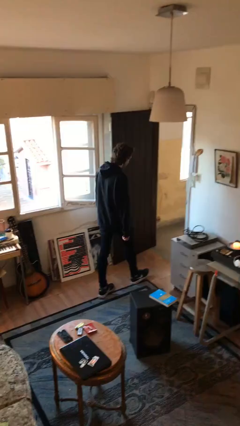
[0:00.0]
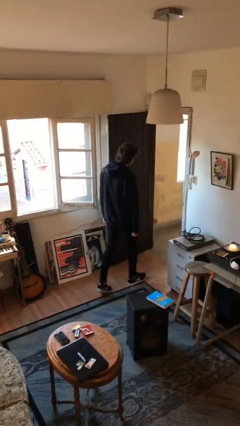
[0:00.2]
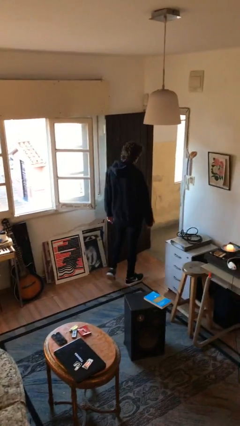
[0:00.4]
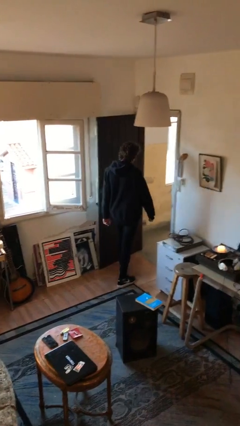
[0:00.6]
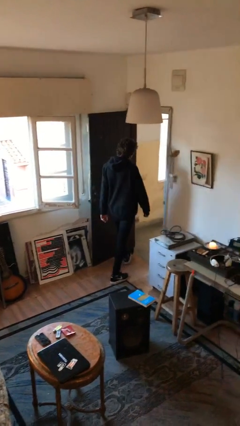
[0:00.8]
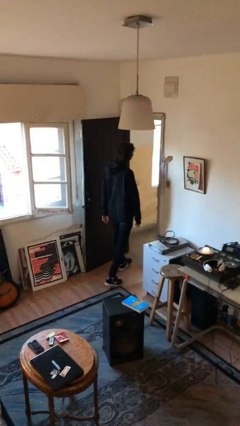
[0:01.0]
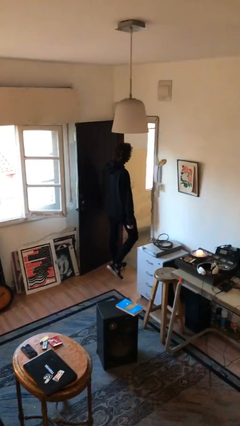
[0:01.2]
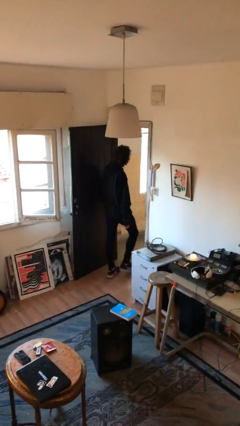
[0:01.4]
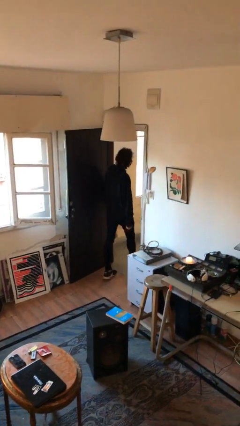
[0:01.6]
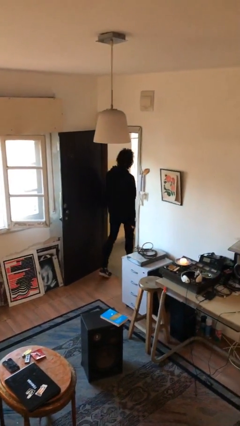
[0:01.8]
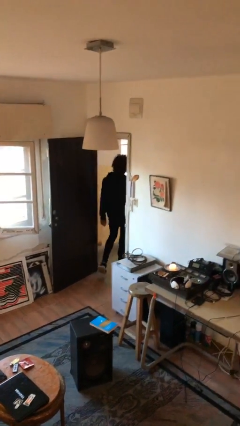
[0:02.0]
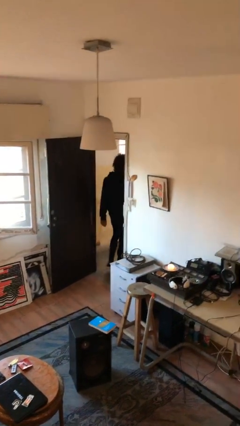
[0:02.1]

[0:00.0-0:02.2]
person exits scene through structure

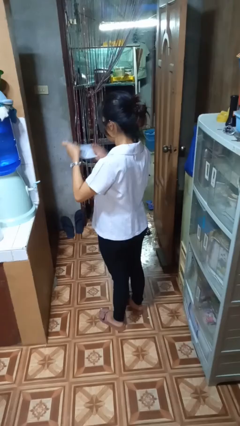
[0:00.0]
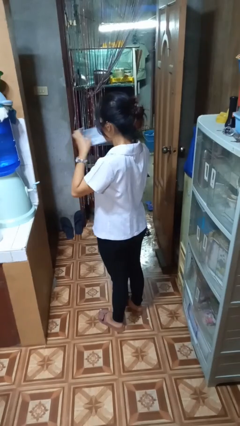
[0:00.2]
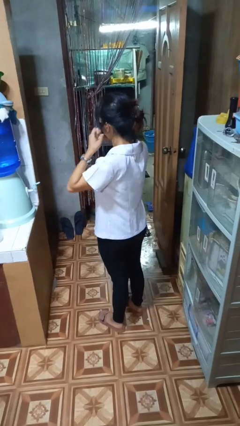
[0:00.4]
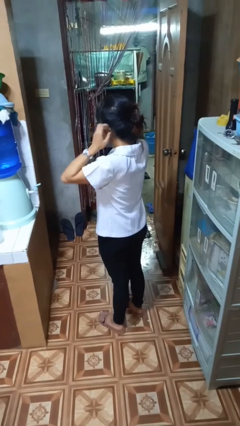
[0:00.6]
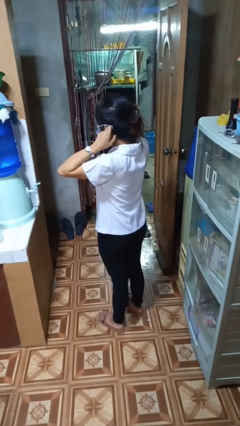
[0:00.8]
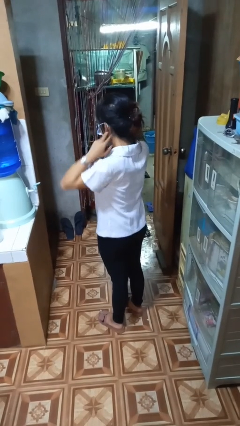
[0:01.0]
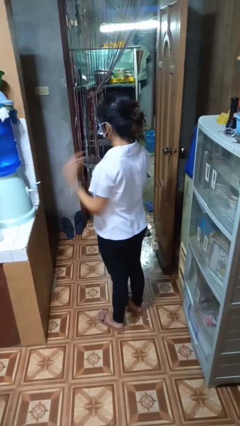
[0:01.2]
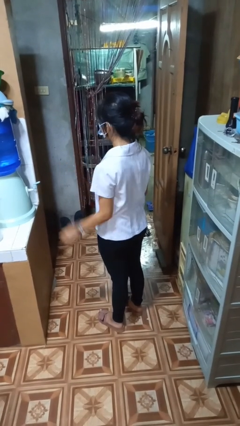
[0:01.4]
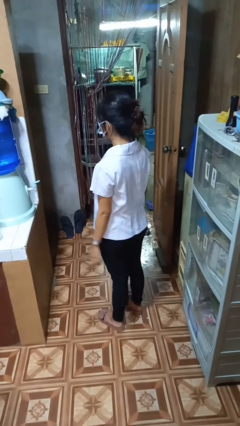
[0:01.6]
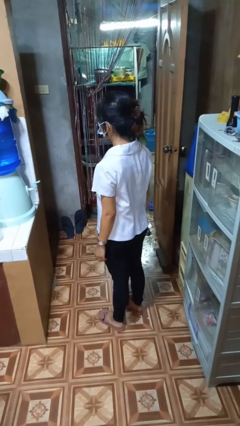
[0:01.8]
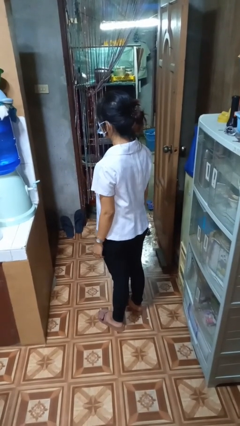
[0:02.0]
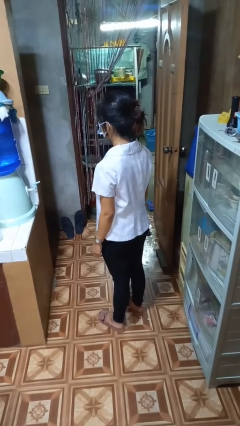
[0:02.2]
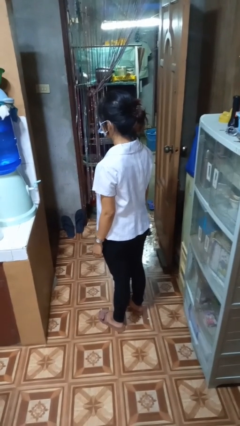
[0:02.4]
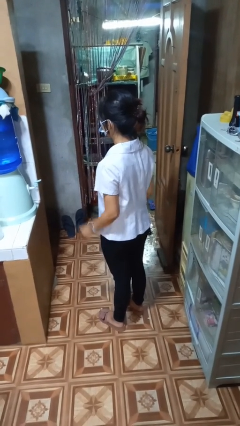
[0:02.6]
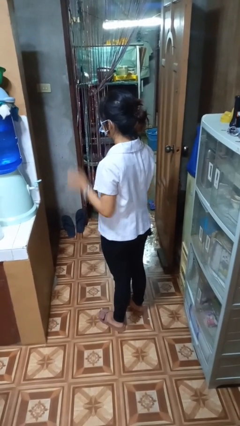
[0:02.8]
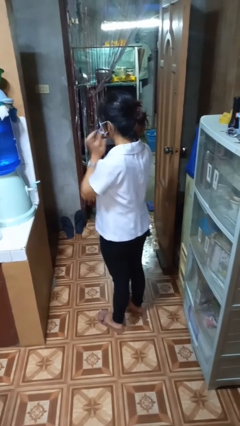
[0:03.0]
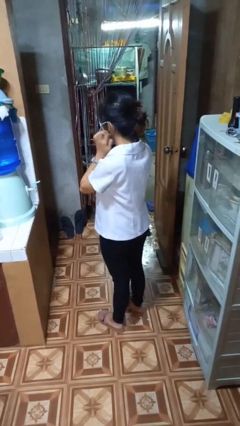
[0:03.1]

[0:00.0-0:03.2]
person puts on facemask

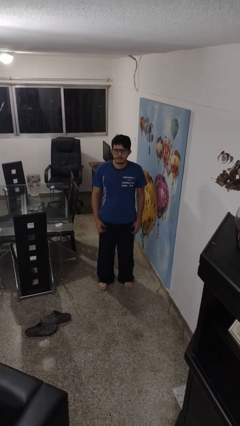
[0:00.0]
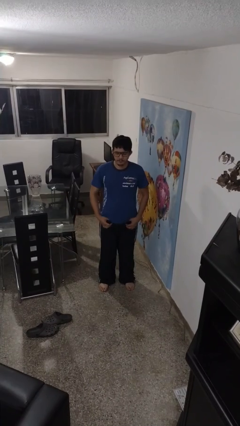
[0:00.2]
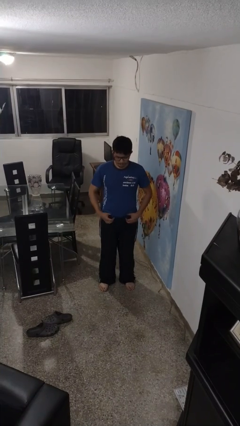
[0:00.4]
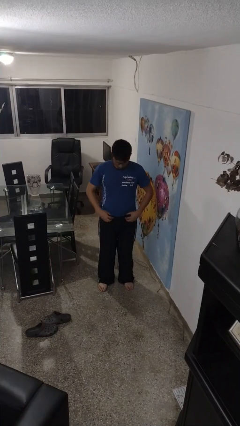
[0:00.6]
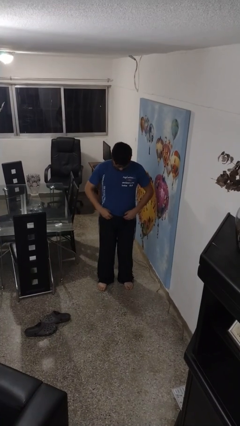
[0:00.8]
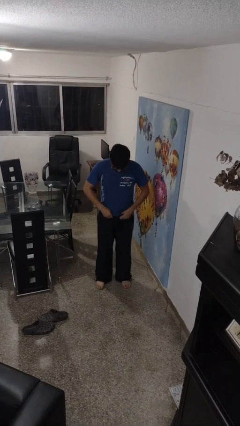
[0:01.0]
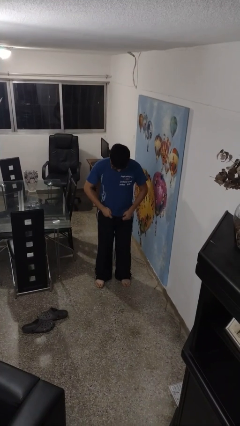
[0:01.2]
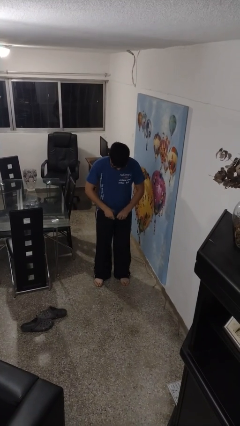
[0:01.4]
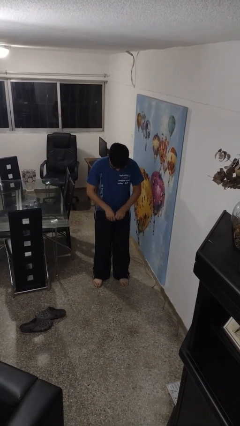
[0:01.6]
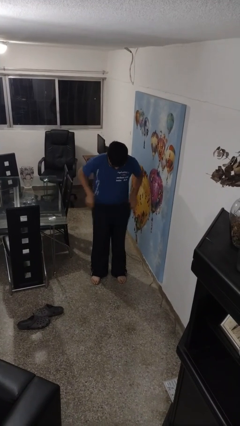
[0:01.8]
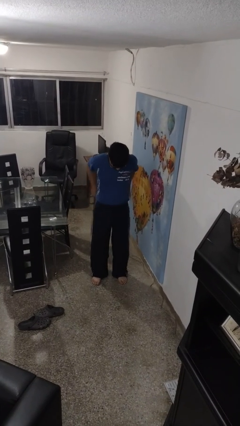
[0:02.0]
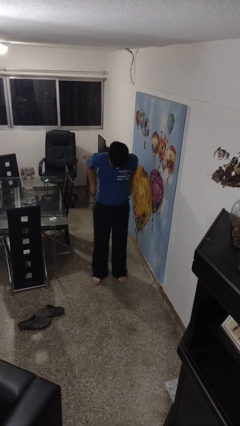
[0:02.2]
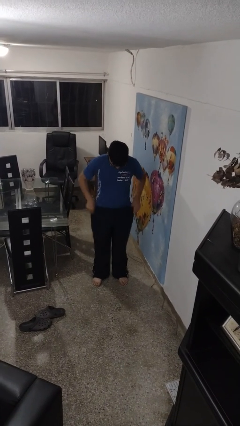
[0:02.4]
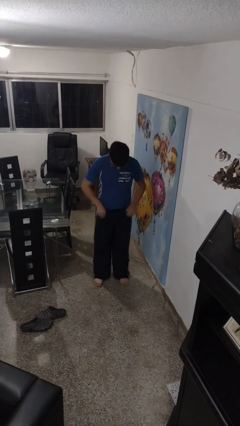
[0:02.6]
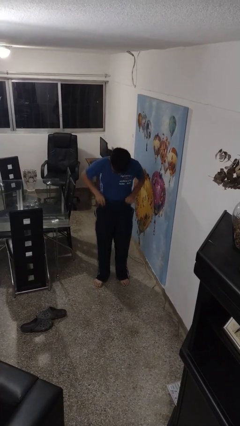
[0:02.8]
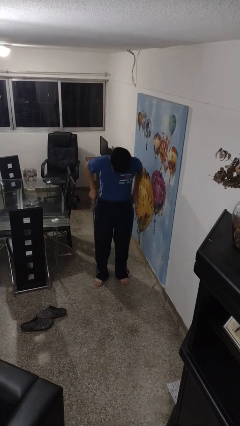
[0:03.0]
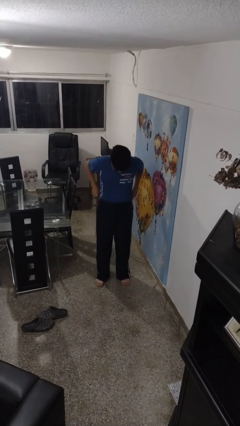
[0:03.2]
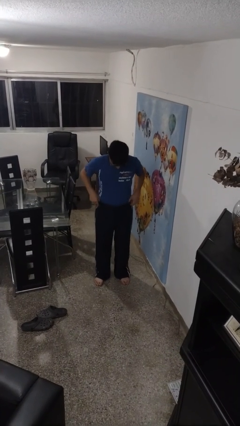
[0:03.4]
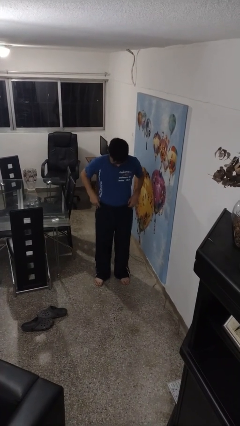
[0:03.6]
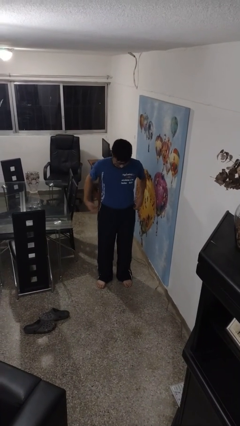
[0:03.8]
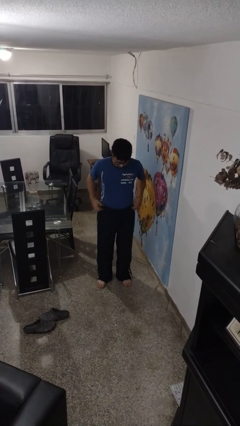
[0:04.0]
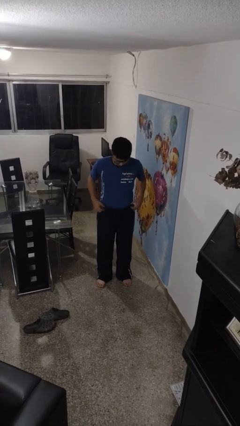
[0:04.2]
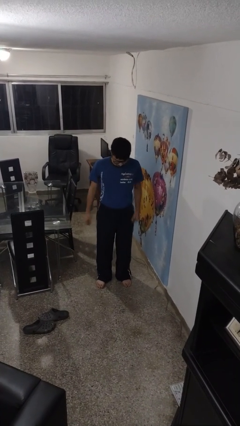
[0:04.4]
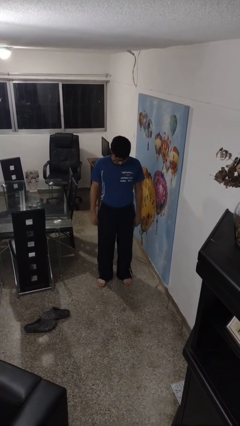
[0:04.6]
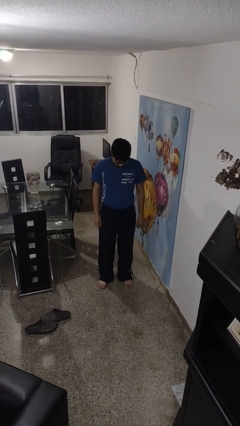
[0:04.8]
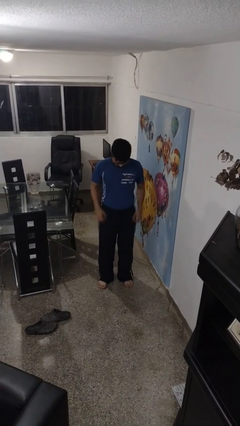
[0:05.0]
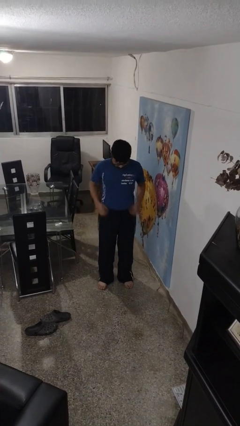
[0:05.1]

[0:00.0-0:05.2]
person tucks in shirt

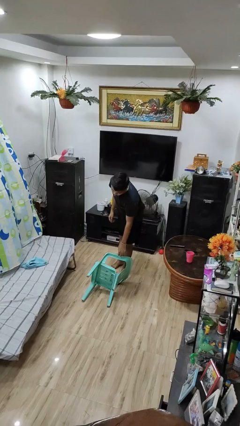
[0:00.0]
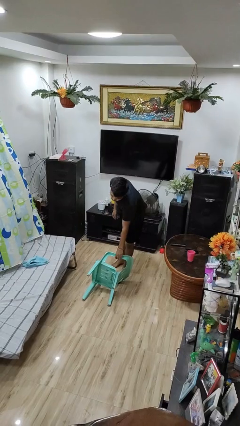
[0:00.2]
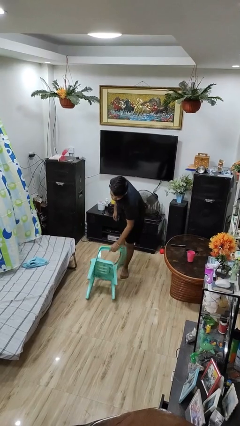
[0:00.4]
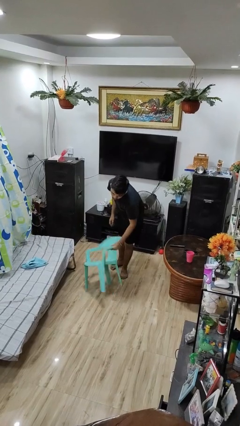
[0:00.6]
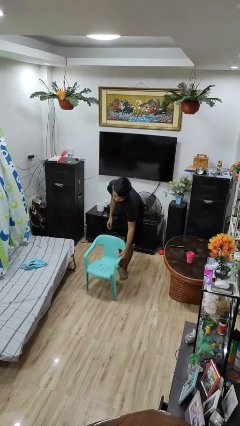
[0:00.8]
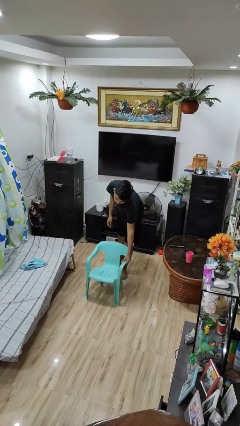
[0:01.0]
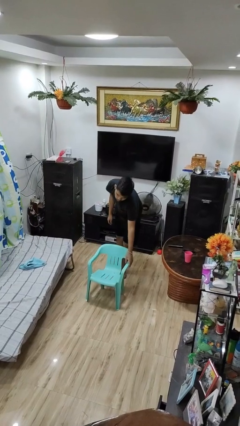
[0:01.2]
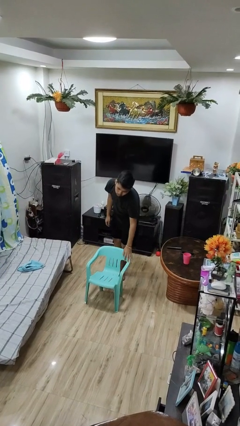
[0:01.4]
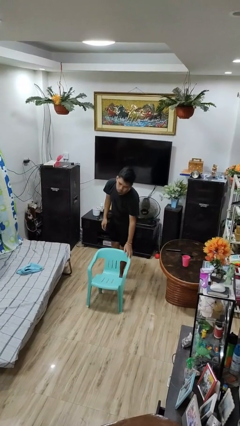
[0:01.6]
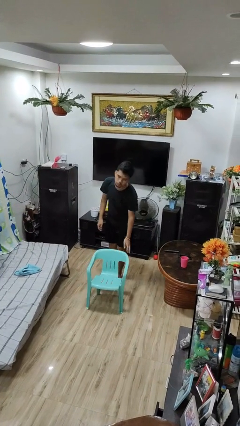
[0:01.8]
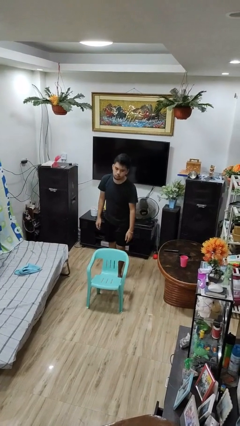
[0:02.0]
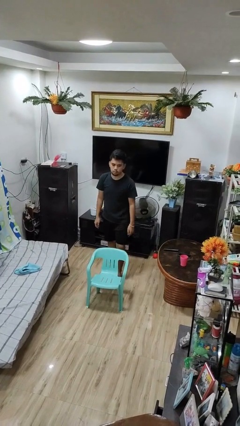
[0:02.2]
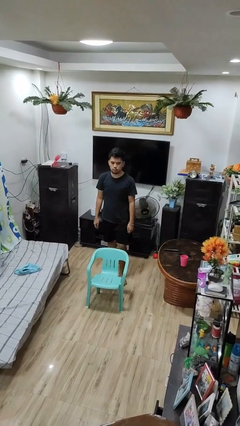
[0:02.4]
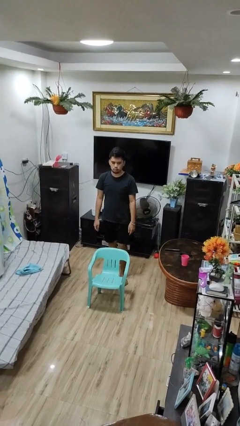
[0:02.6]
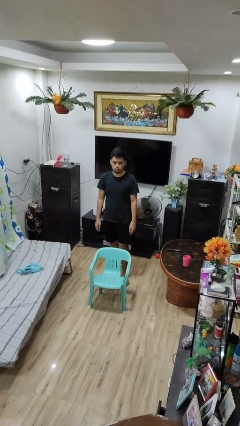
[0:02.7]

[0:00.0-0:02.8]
person sets upright furniture

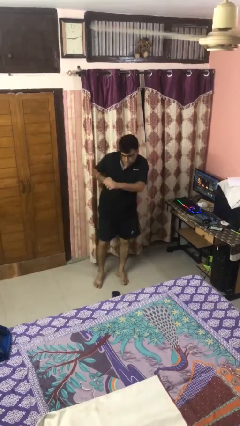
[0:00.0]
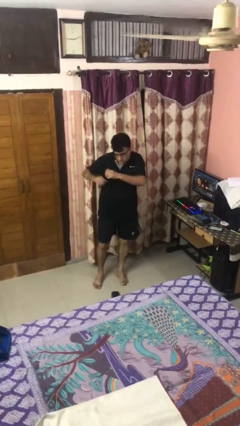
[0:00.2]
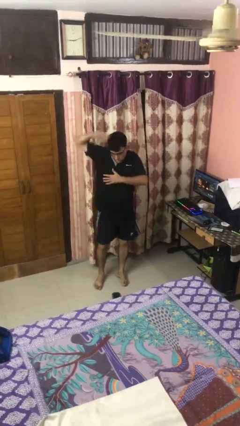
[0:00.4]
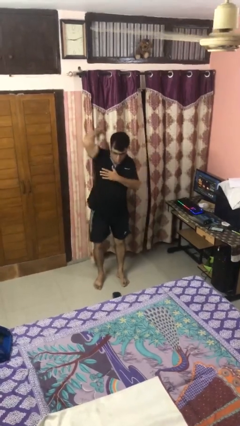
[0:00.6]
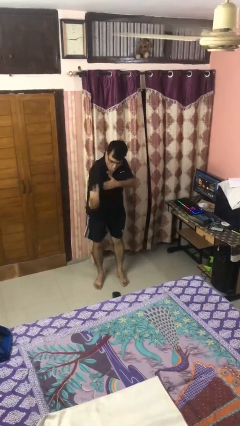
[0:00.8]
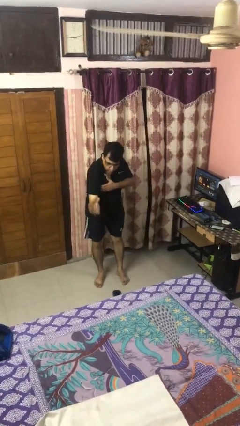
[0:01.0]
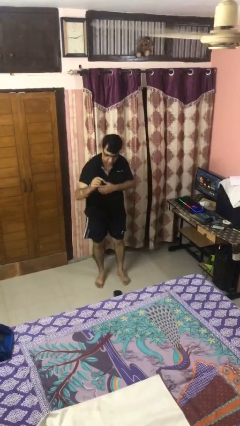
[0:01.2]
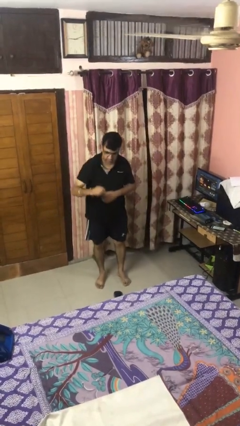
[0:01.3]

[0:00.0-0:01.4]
person karate chop

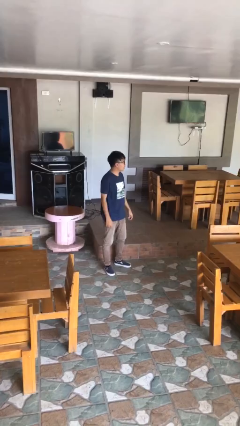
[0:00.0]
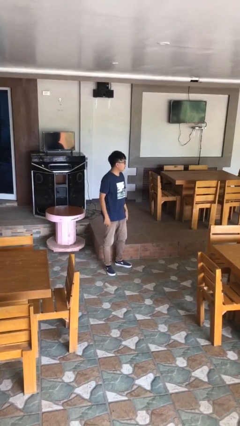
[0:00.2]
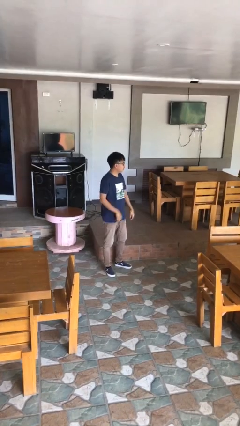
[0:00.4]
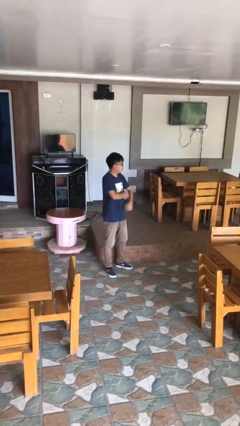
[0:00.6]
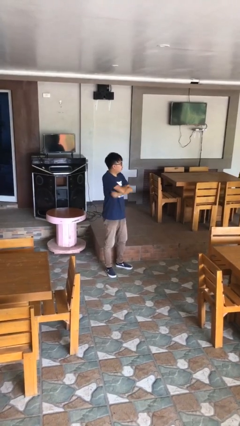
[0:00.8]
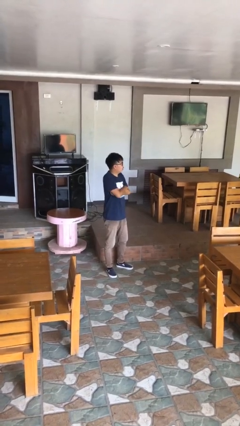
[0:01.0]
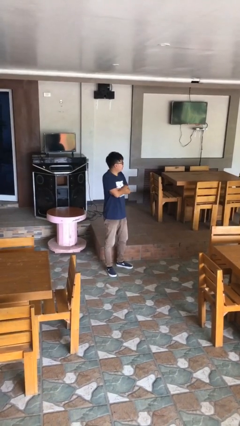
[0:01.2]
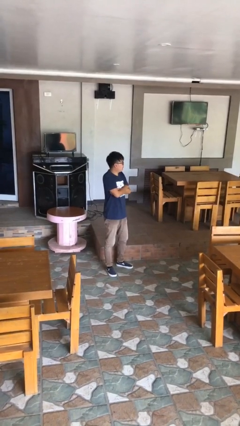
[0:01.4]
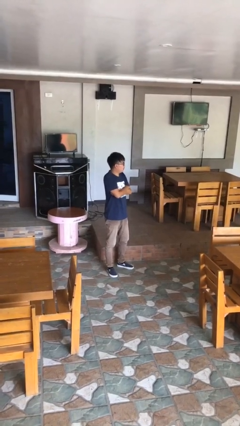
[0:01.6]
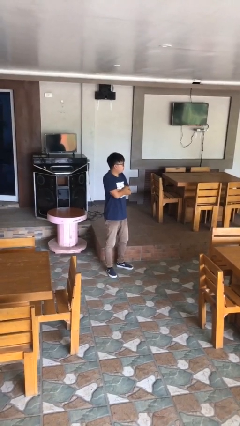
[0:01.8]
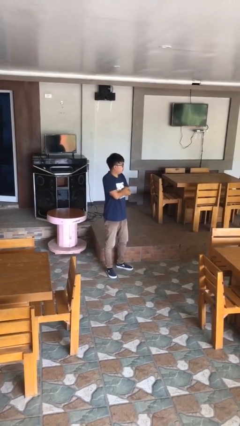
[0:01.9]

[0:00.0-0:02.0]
person crosses arms
